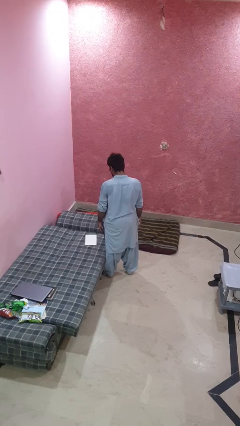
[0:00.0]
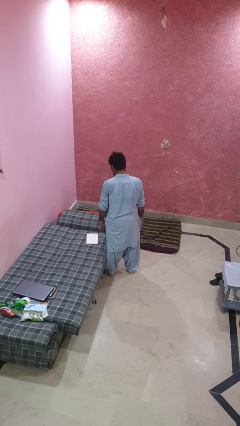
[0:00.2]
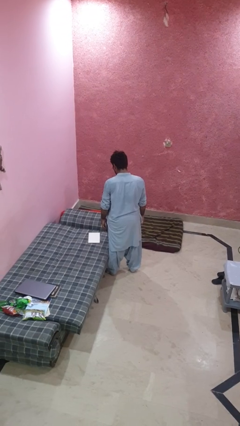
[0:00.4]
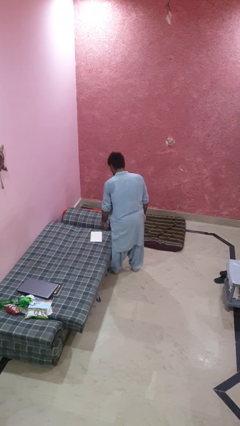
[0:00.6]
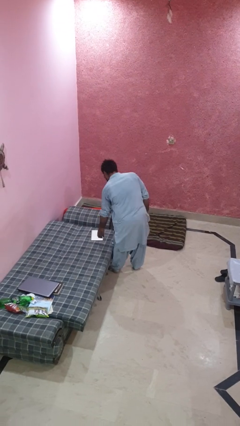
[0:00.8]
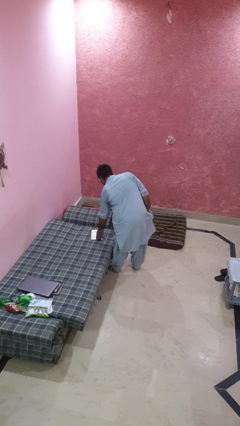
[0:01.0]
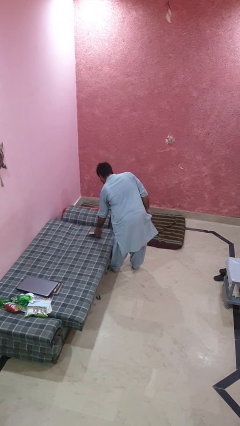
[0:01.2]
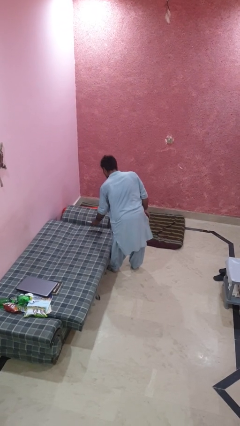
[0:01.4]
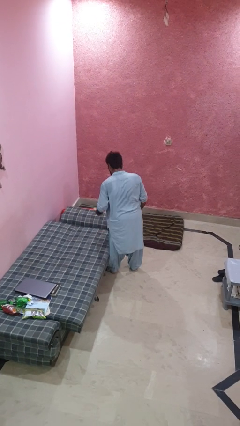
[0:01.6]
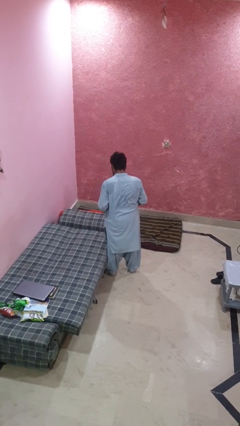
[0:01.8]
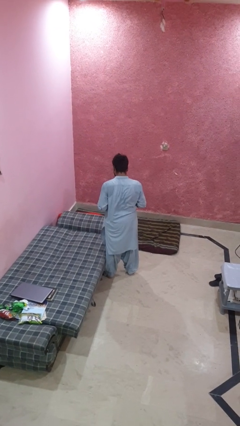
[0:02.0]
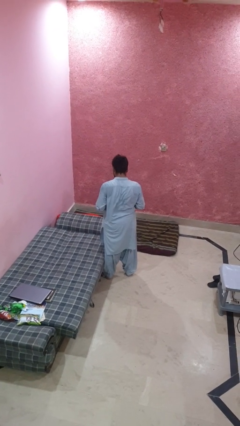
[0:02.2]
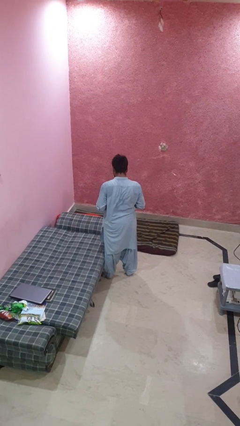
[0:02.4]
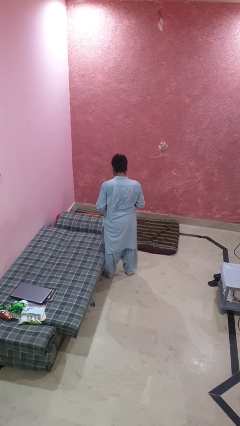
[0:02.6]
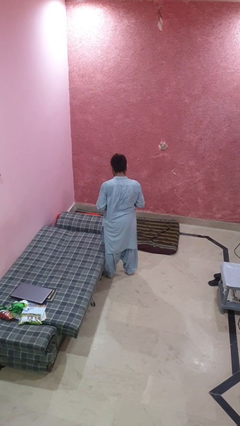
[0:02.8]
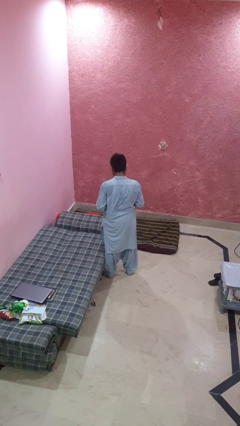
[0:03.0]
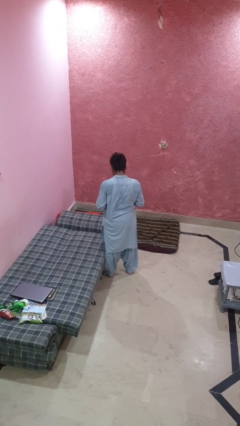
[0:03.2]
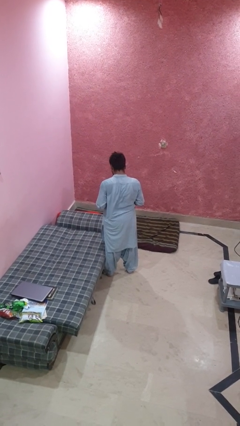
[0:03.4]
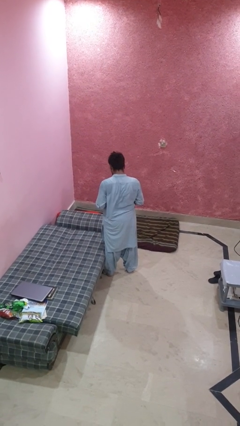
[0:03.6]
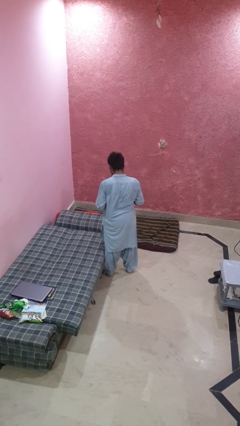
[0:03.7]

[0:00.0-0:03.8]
person picks up object from bed

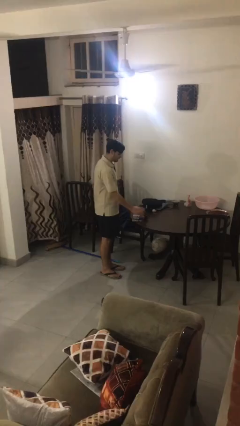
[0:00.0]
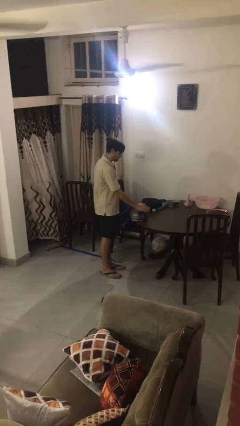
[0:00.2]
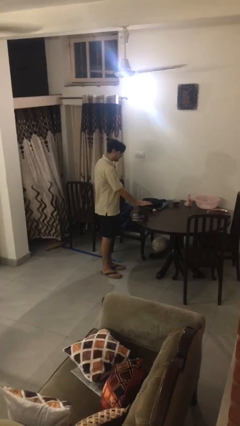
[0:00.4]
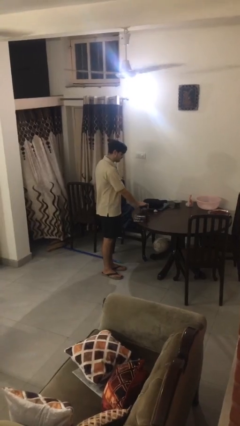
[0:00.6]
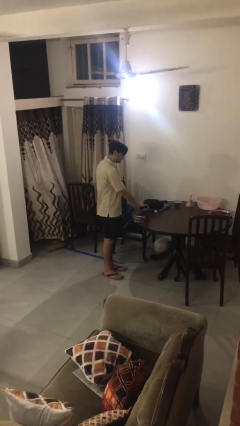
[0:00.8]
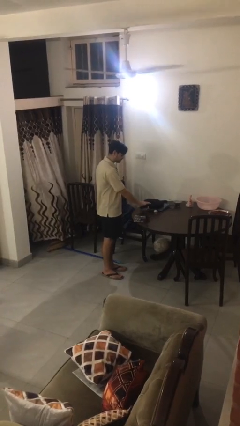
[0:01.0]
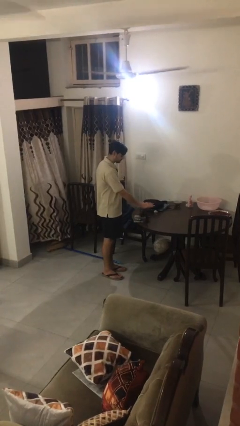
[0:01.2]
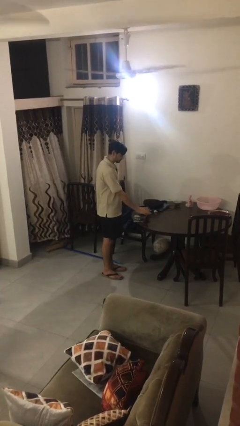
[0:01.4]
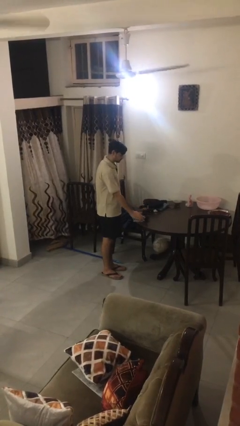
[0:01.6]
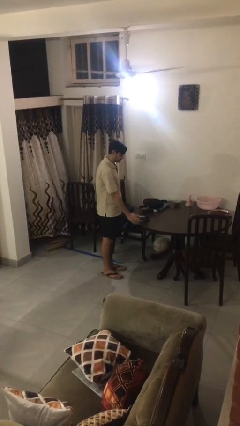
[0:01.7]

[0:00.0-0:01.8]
person waves hand over object

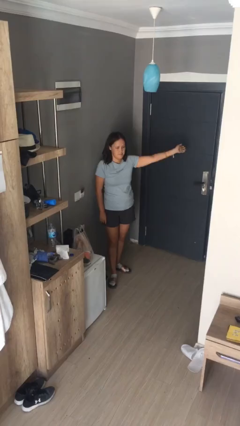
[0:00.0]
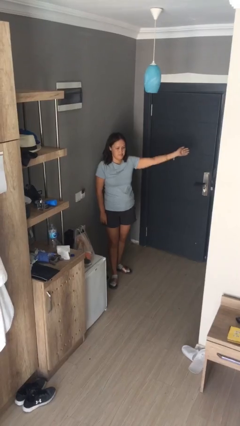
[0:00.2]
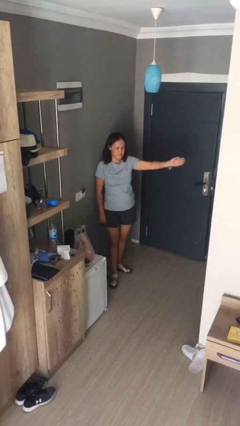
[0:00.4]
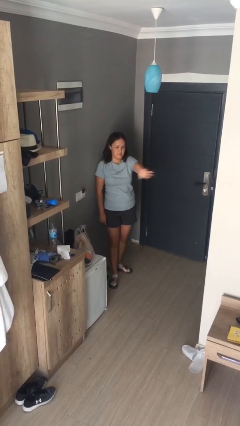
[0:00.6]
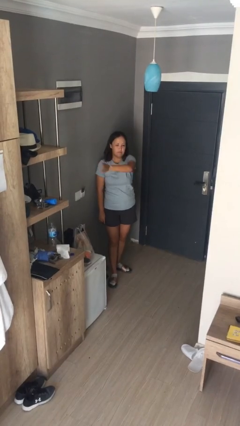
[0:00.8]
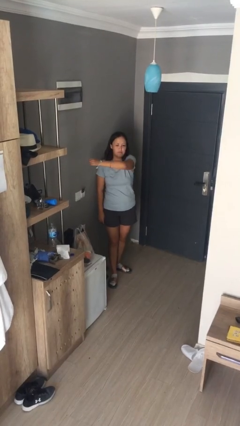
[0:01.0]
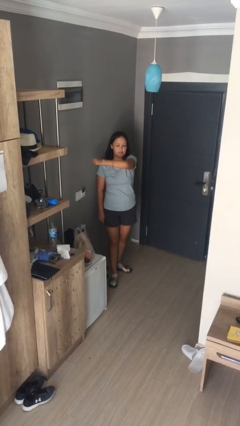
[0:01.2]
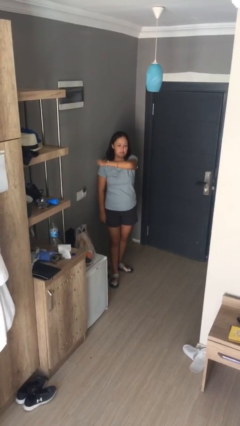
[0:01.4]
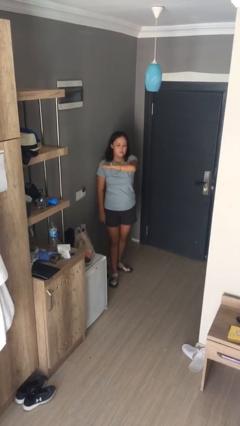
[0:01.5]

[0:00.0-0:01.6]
person gestures swipe right

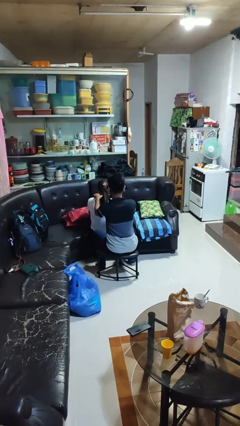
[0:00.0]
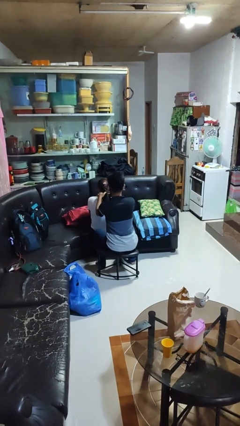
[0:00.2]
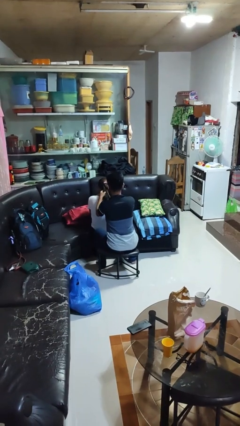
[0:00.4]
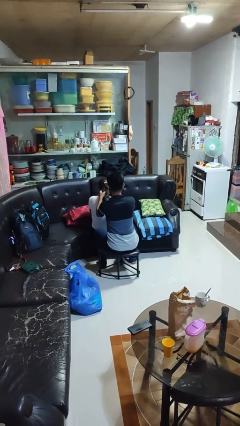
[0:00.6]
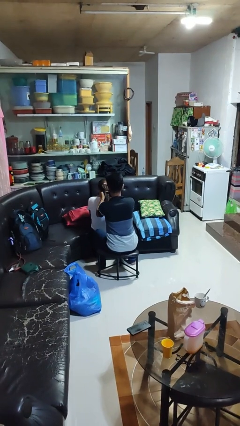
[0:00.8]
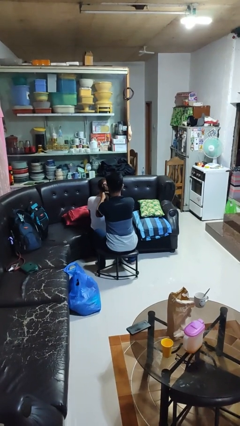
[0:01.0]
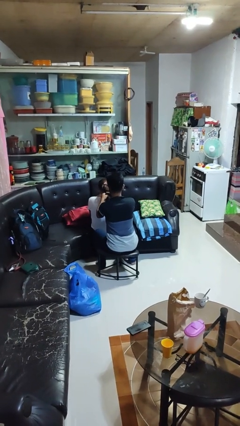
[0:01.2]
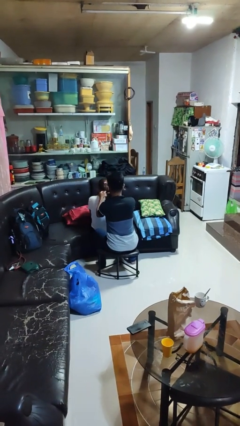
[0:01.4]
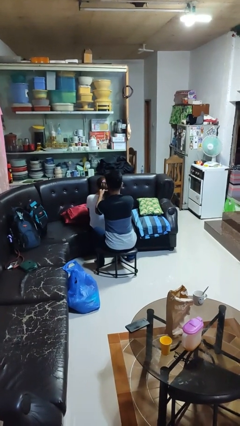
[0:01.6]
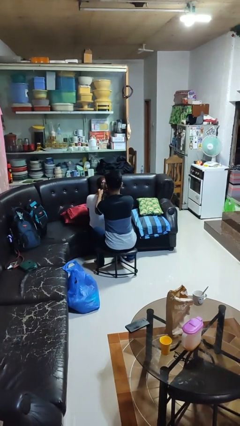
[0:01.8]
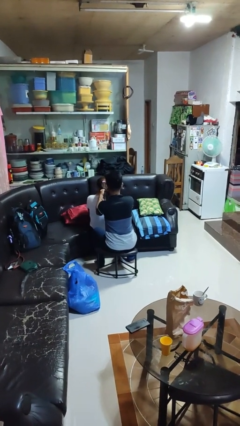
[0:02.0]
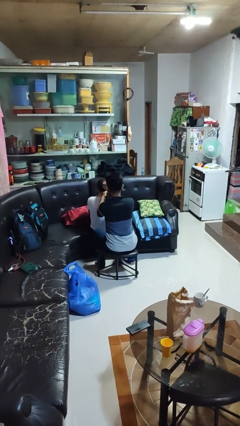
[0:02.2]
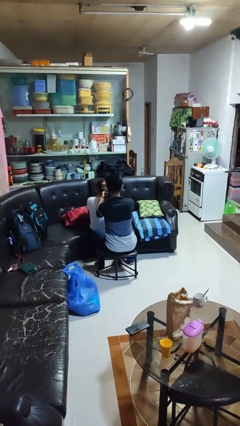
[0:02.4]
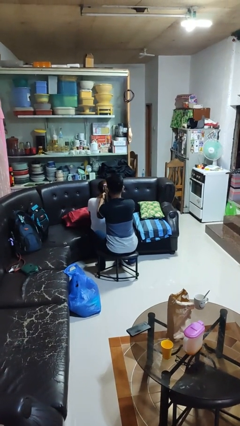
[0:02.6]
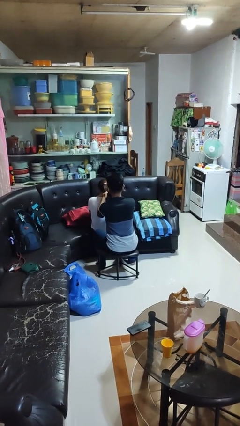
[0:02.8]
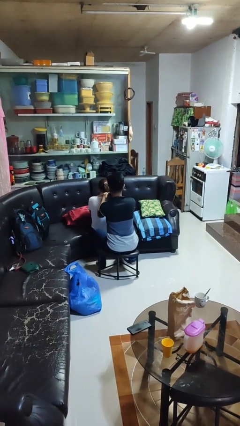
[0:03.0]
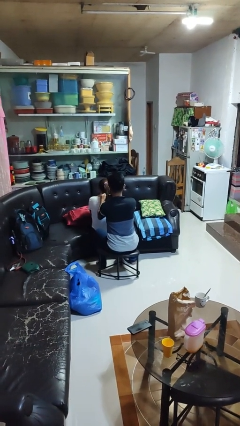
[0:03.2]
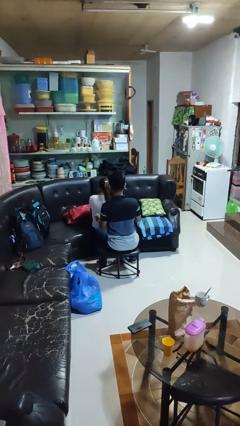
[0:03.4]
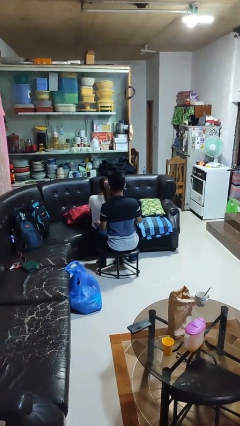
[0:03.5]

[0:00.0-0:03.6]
person braids hair of person

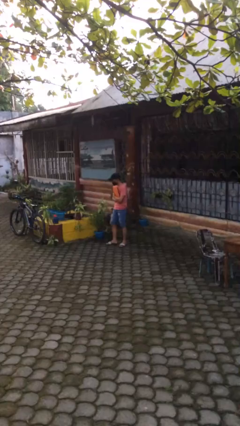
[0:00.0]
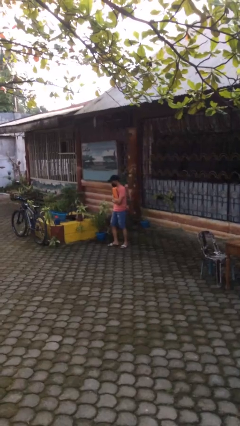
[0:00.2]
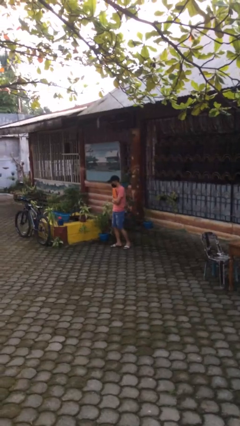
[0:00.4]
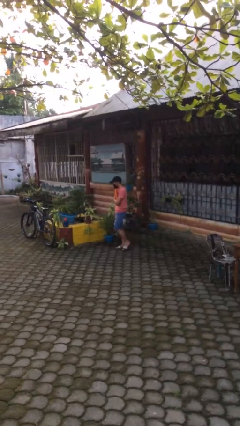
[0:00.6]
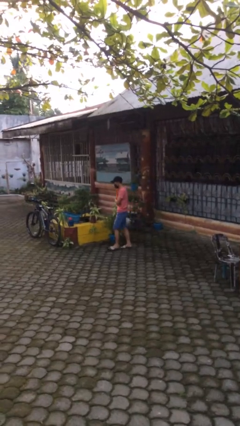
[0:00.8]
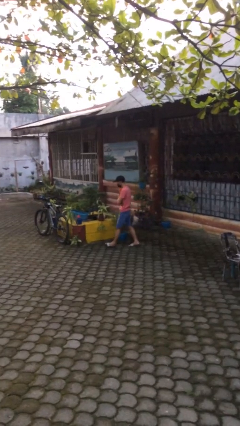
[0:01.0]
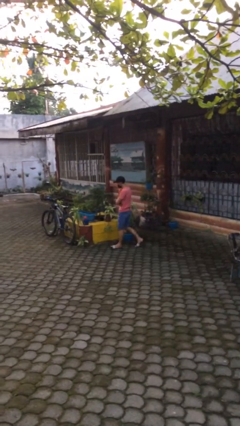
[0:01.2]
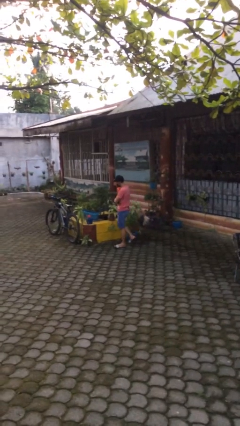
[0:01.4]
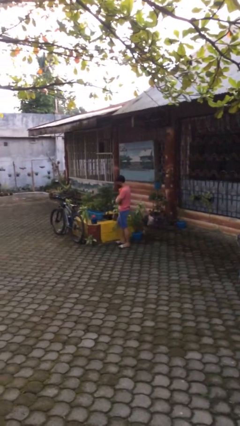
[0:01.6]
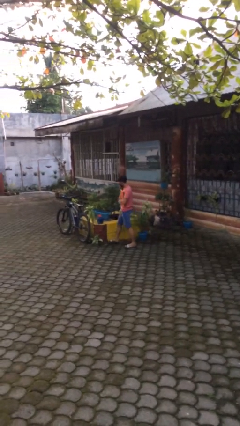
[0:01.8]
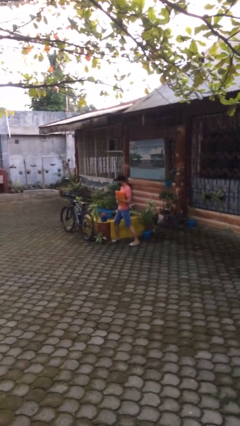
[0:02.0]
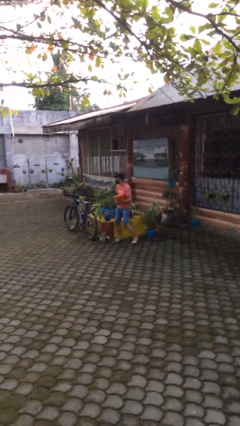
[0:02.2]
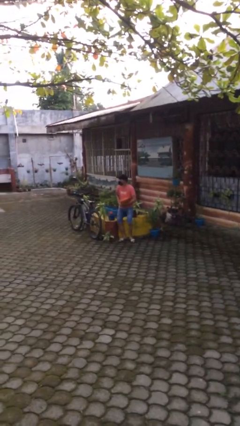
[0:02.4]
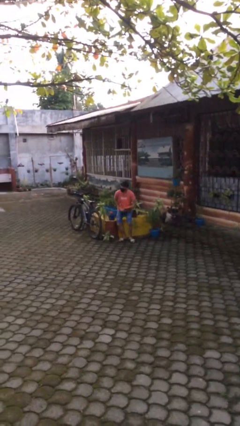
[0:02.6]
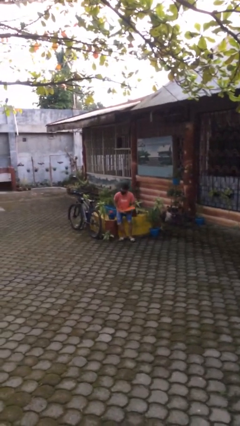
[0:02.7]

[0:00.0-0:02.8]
person sits down

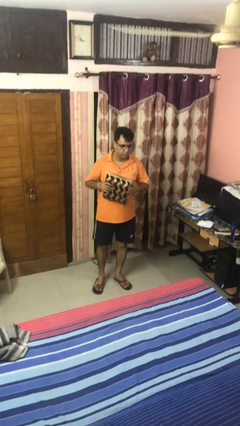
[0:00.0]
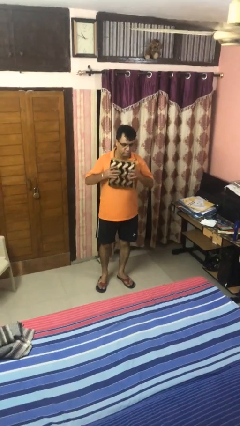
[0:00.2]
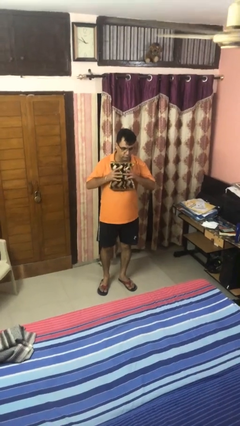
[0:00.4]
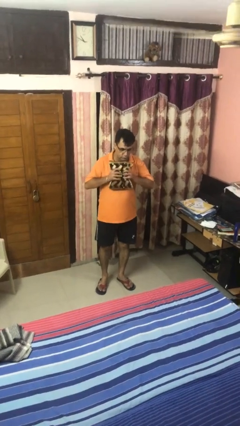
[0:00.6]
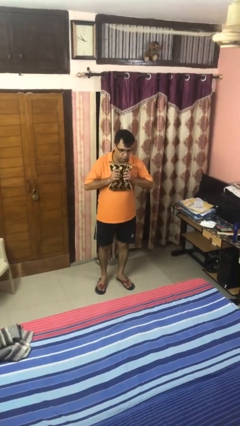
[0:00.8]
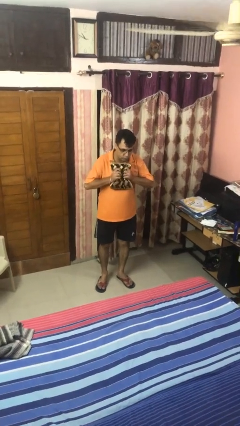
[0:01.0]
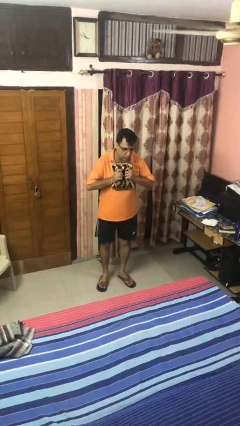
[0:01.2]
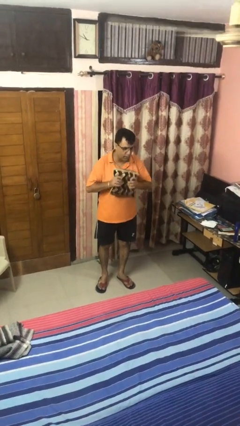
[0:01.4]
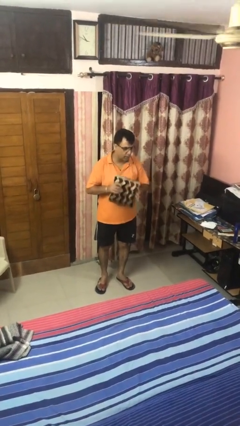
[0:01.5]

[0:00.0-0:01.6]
person squeezes object

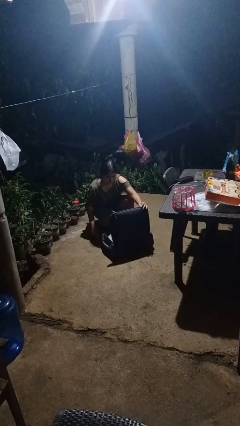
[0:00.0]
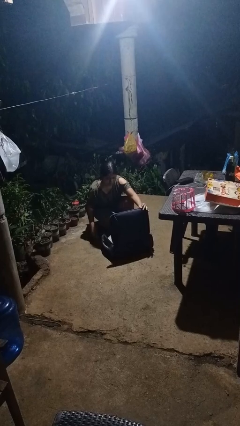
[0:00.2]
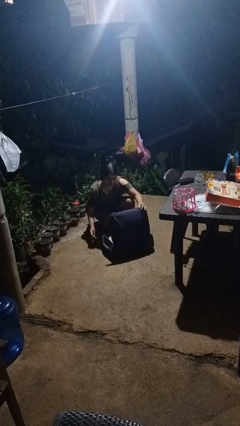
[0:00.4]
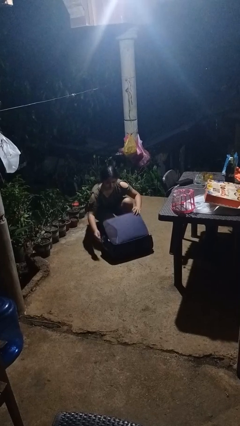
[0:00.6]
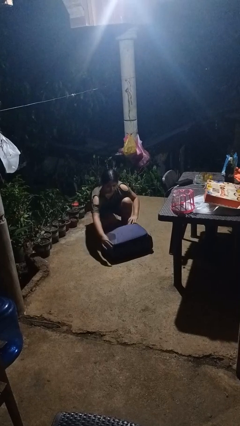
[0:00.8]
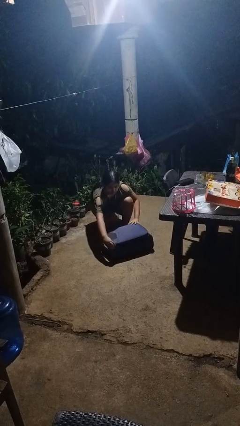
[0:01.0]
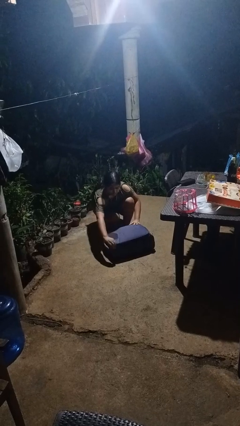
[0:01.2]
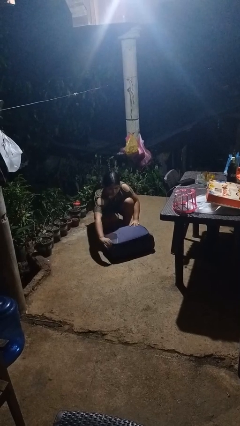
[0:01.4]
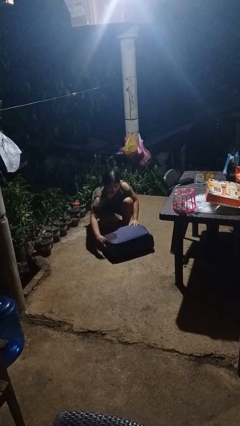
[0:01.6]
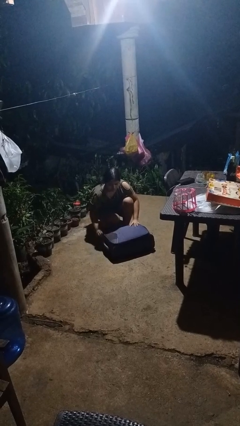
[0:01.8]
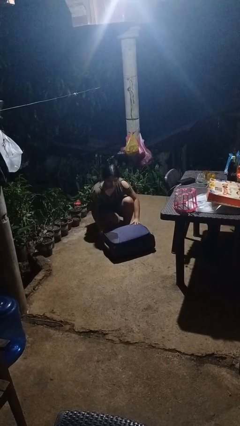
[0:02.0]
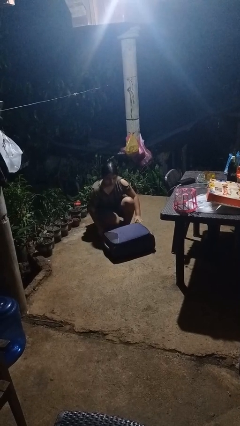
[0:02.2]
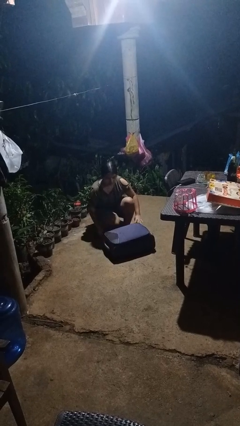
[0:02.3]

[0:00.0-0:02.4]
person closes suitcase
